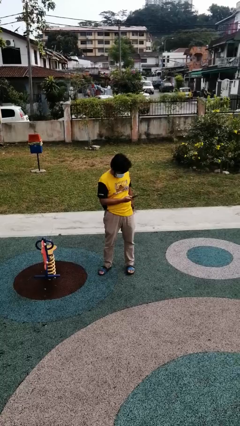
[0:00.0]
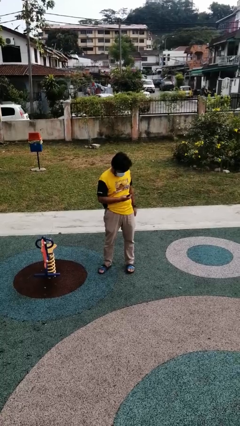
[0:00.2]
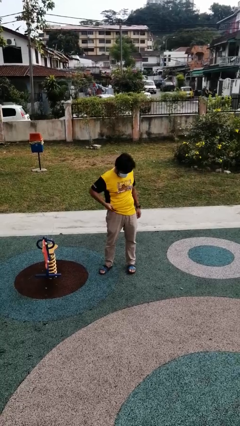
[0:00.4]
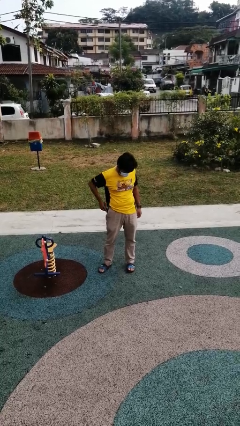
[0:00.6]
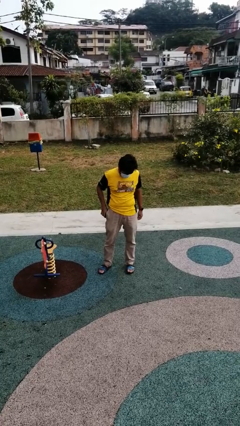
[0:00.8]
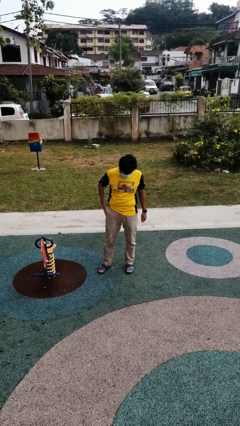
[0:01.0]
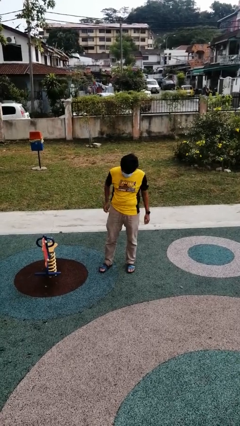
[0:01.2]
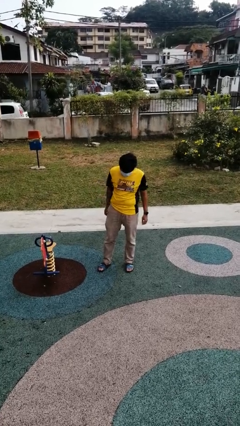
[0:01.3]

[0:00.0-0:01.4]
person puts phone into pocket

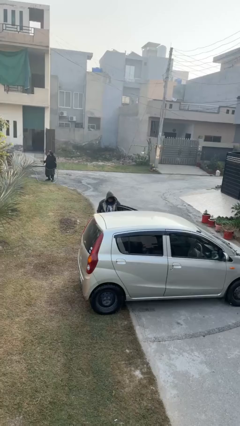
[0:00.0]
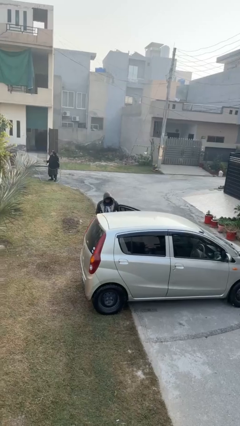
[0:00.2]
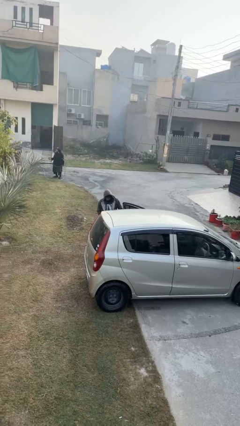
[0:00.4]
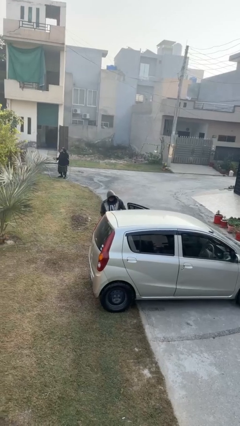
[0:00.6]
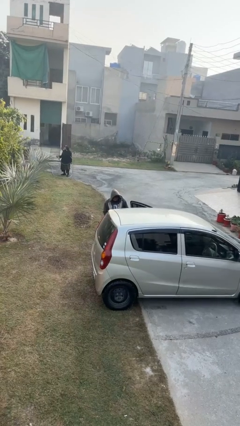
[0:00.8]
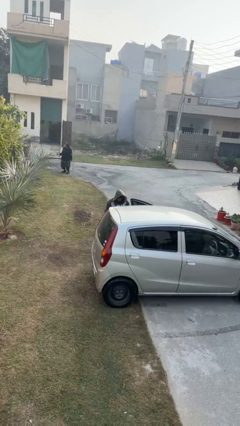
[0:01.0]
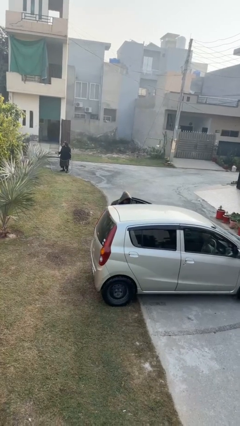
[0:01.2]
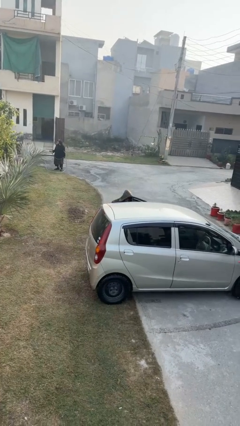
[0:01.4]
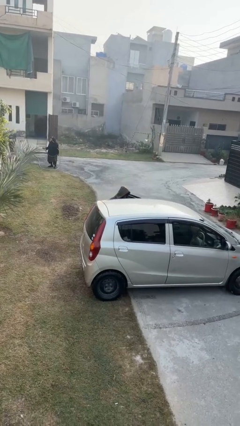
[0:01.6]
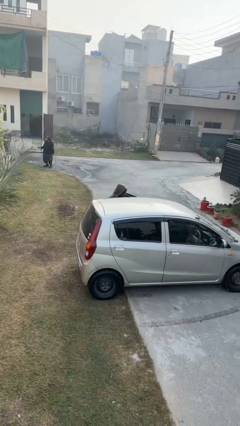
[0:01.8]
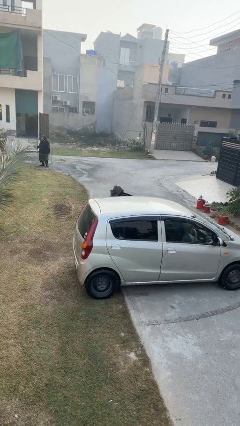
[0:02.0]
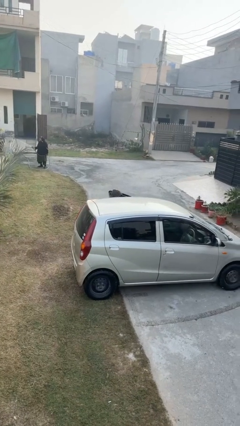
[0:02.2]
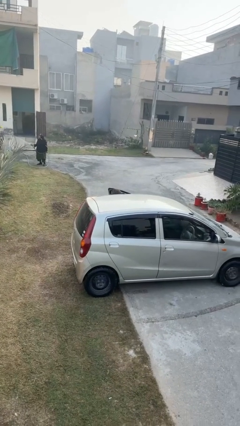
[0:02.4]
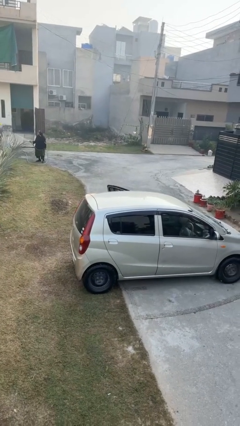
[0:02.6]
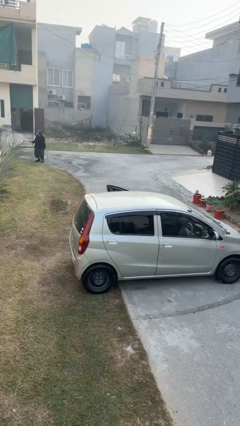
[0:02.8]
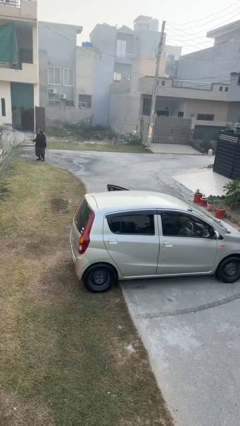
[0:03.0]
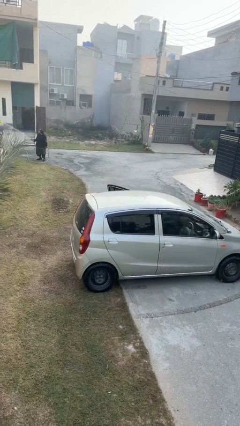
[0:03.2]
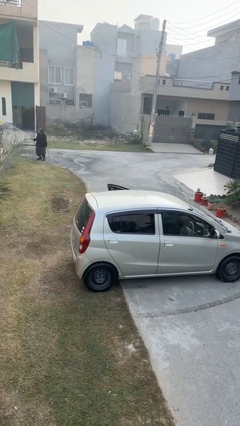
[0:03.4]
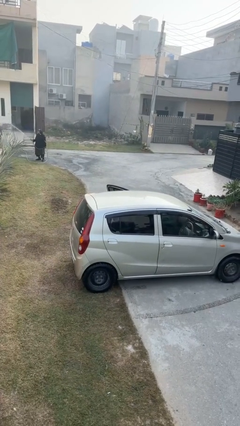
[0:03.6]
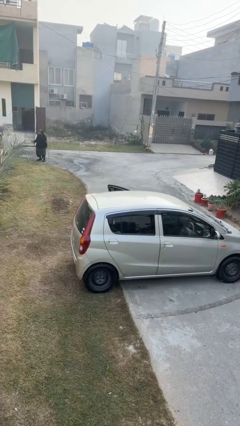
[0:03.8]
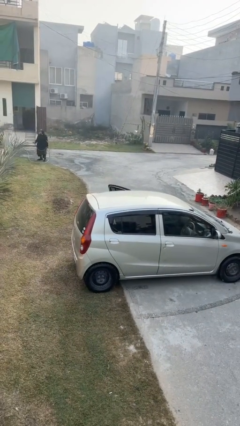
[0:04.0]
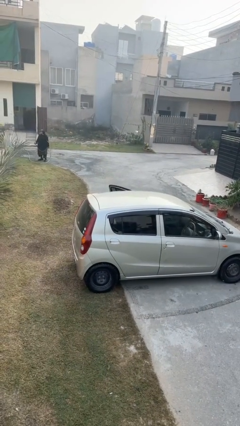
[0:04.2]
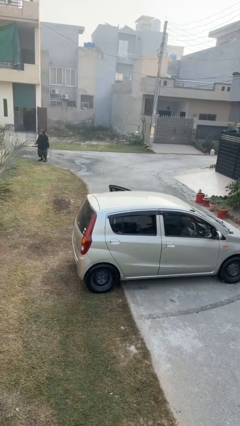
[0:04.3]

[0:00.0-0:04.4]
person enters car

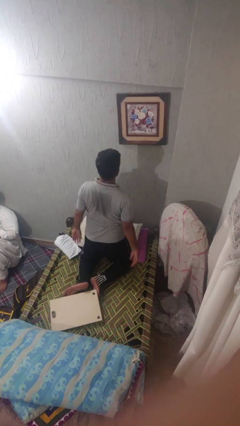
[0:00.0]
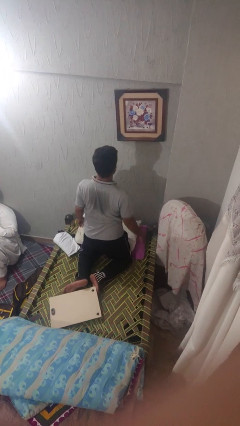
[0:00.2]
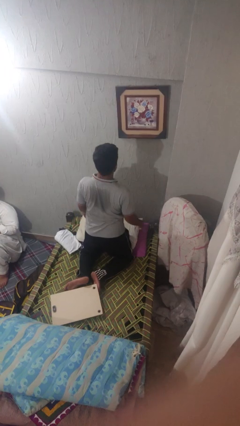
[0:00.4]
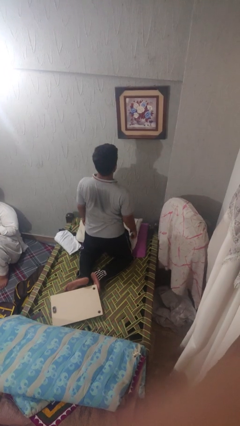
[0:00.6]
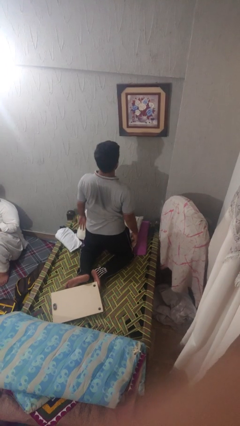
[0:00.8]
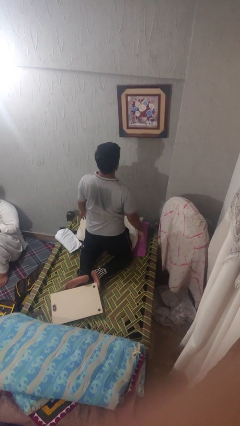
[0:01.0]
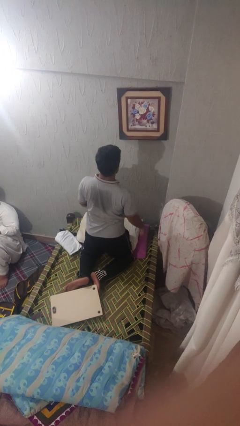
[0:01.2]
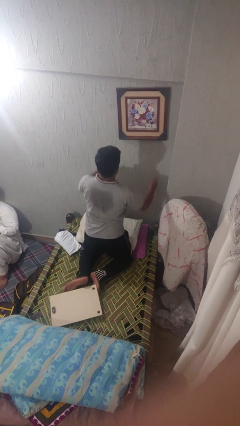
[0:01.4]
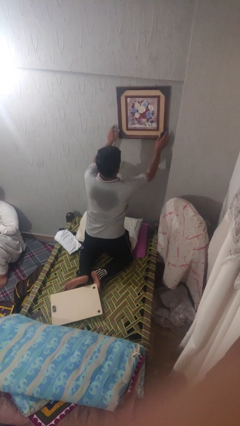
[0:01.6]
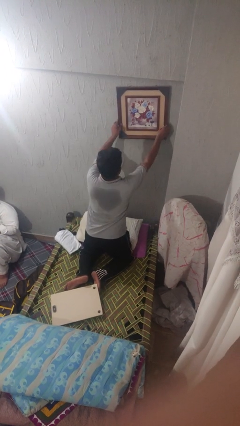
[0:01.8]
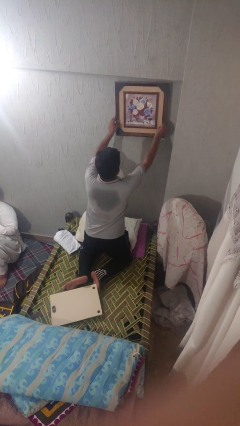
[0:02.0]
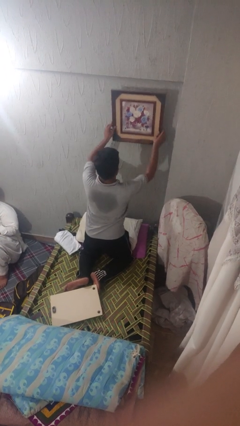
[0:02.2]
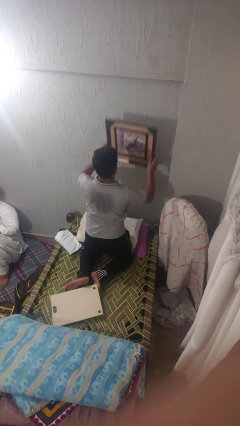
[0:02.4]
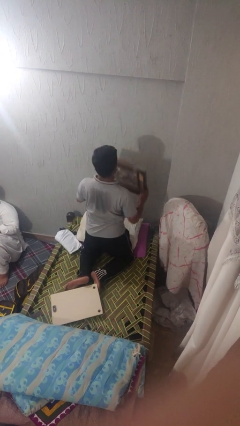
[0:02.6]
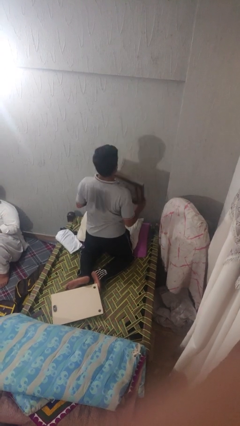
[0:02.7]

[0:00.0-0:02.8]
person takes down picture frame

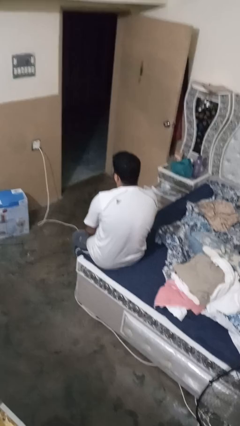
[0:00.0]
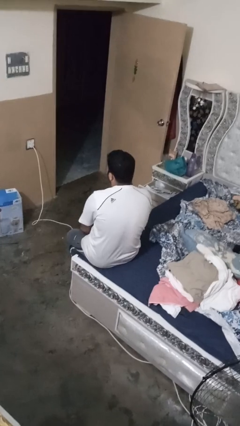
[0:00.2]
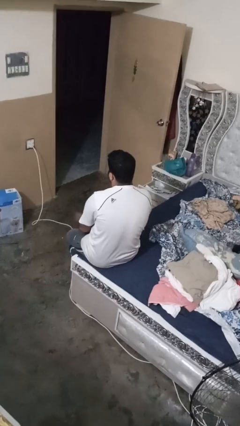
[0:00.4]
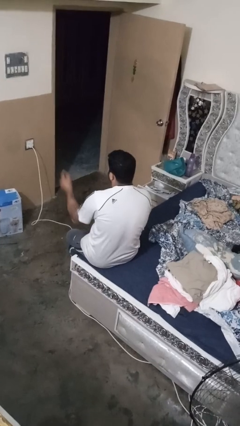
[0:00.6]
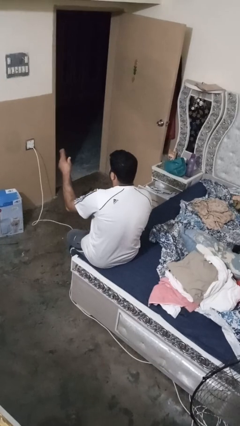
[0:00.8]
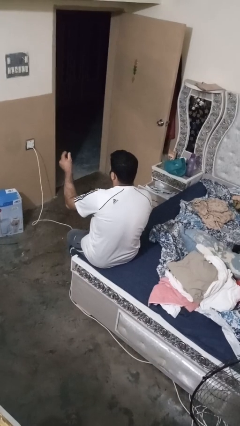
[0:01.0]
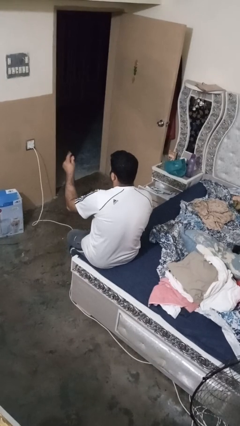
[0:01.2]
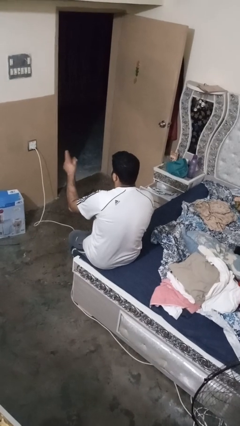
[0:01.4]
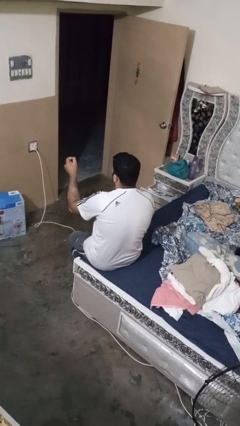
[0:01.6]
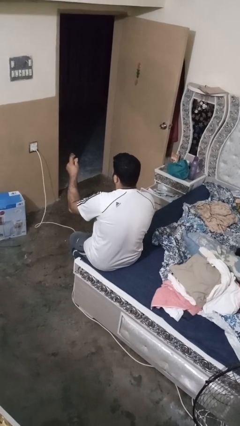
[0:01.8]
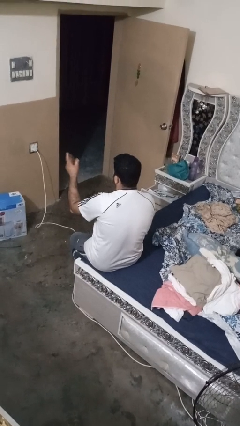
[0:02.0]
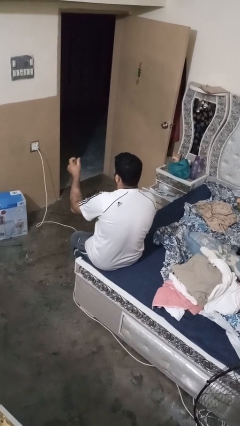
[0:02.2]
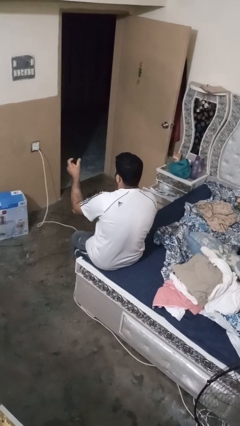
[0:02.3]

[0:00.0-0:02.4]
person snaps fingers

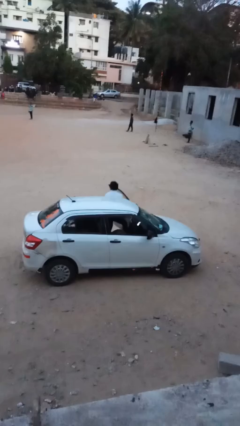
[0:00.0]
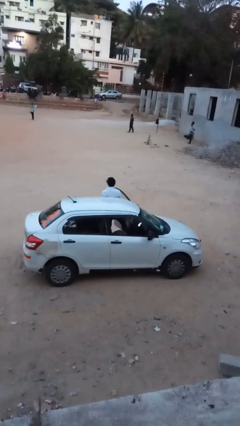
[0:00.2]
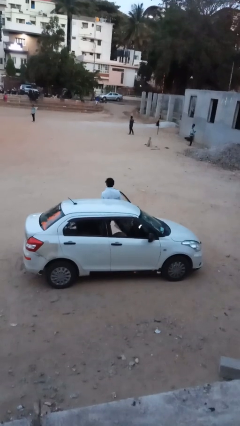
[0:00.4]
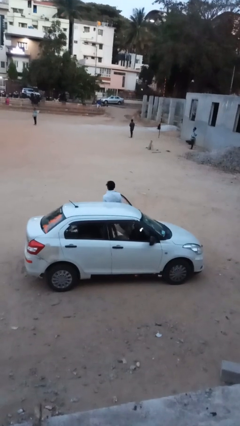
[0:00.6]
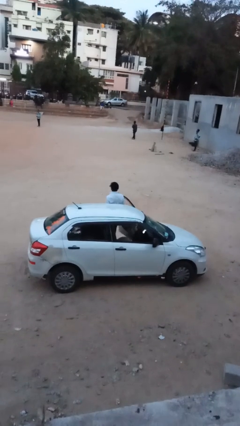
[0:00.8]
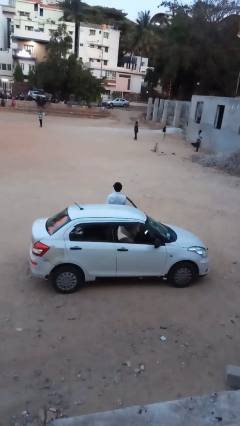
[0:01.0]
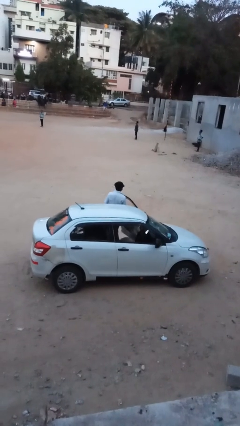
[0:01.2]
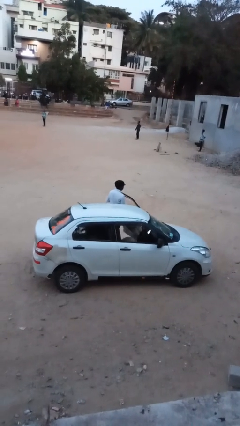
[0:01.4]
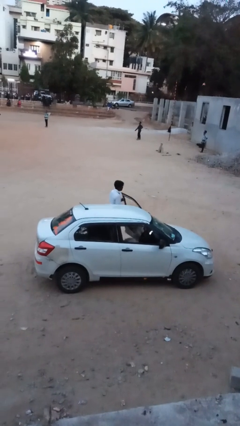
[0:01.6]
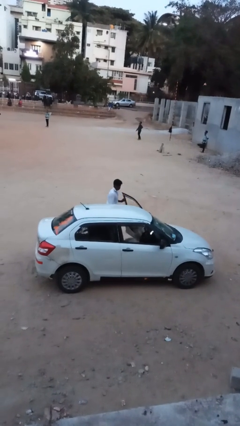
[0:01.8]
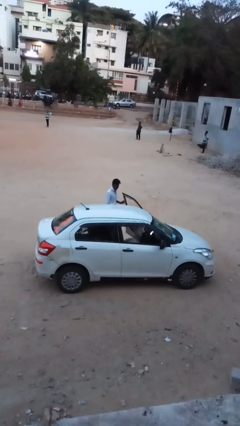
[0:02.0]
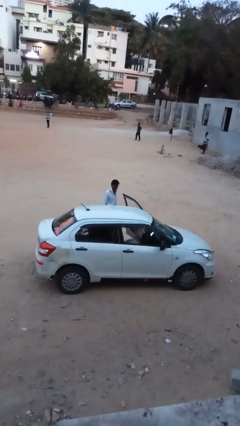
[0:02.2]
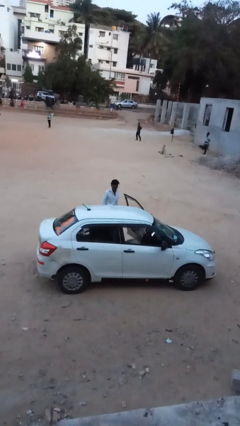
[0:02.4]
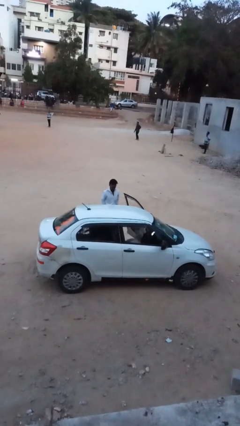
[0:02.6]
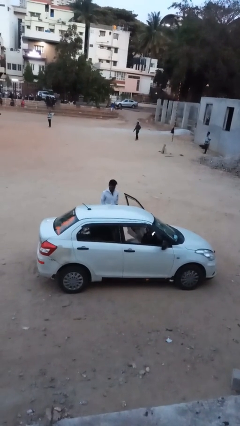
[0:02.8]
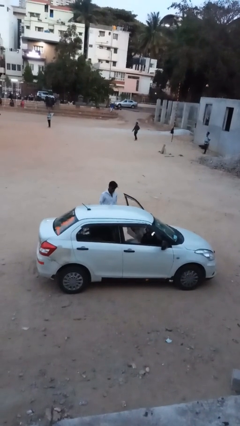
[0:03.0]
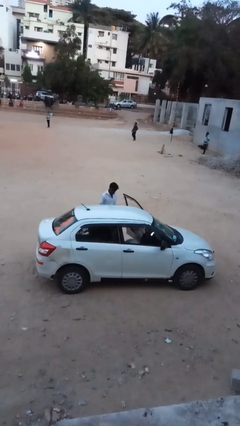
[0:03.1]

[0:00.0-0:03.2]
person exits car

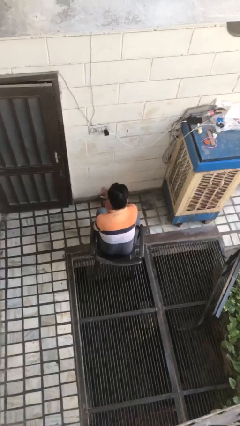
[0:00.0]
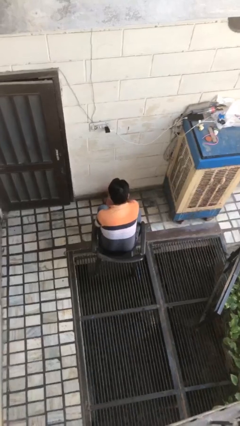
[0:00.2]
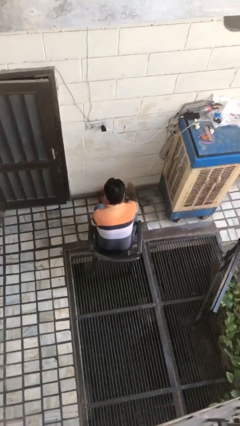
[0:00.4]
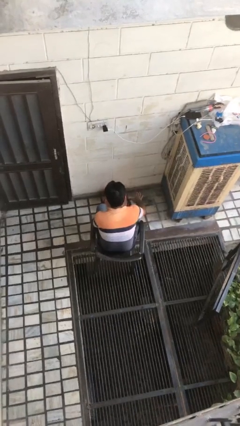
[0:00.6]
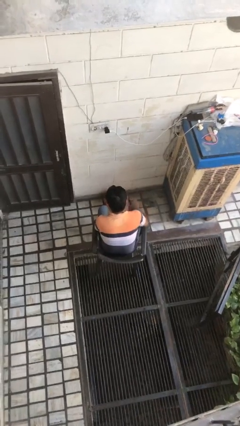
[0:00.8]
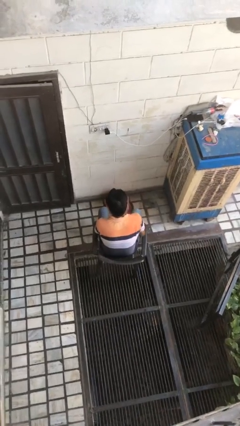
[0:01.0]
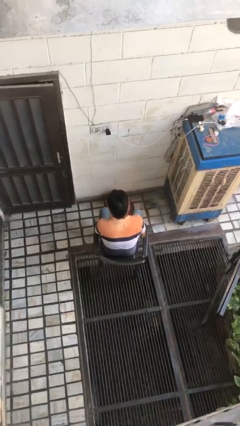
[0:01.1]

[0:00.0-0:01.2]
person waves hand over object

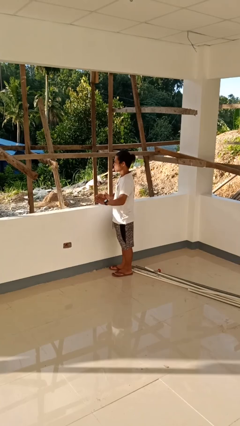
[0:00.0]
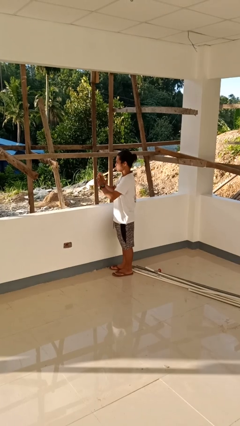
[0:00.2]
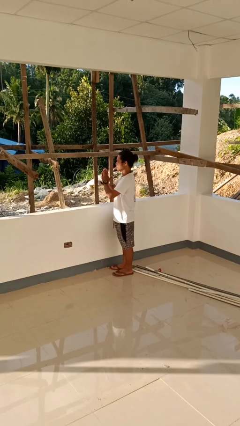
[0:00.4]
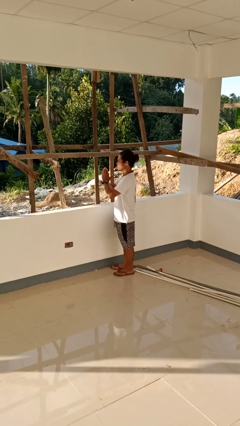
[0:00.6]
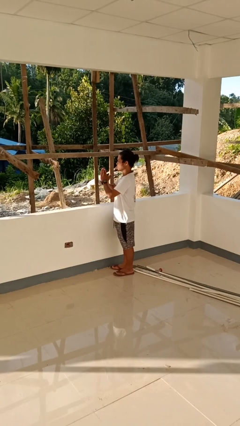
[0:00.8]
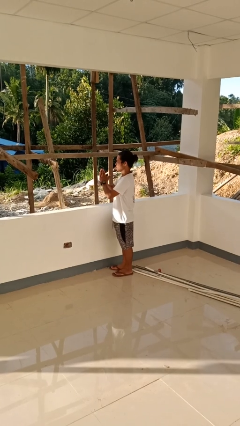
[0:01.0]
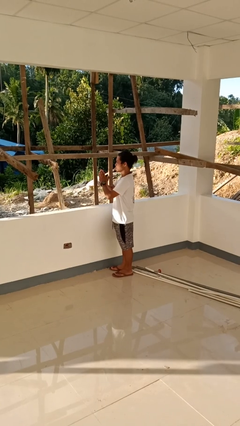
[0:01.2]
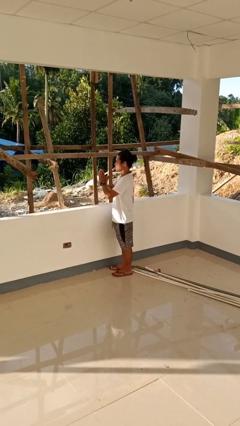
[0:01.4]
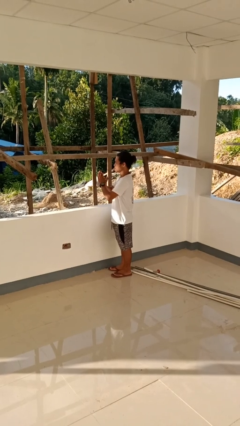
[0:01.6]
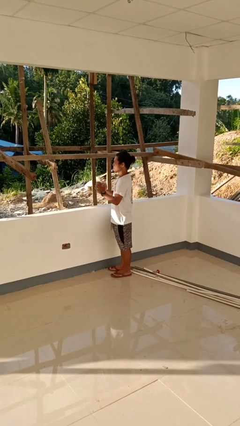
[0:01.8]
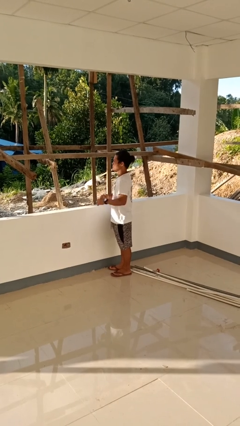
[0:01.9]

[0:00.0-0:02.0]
person prays
